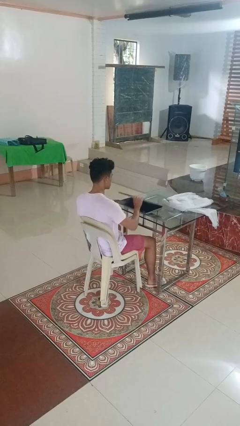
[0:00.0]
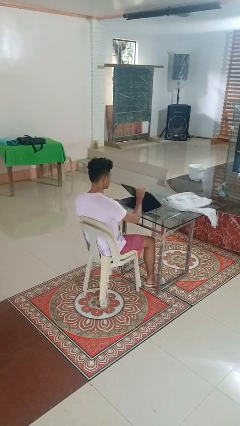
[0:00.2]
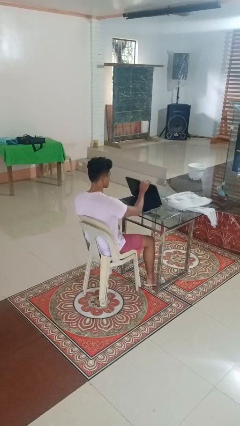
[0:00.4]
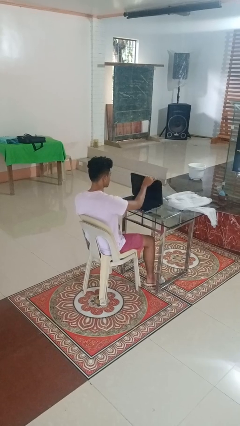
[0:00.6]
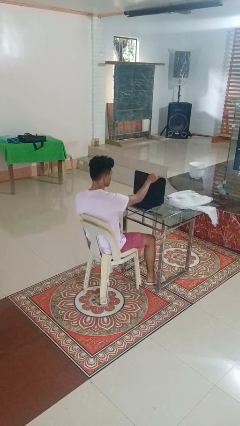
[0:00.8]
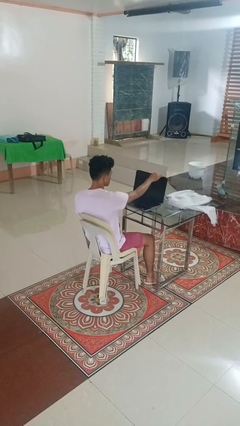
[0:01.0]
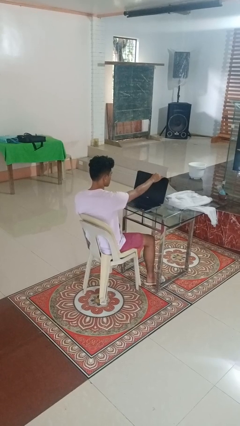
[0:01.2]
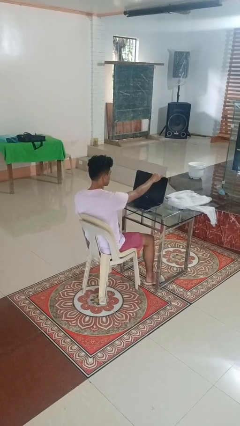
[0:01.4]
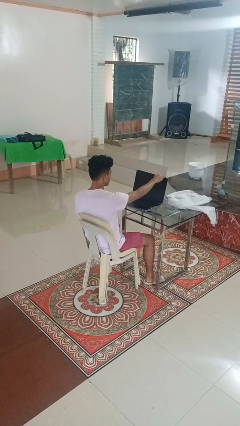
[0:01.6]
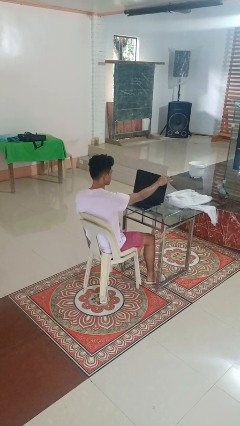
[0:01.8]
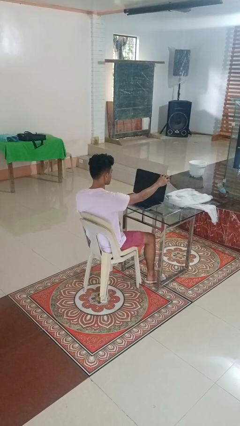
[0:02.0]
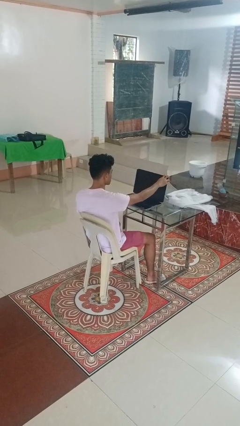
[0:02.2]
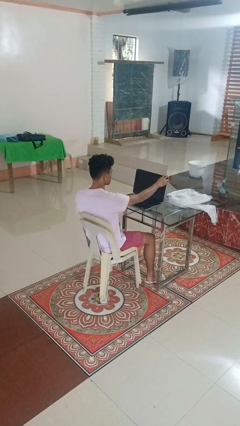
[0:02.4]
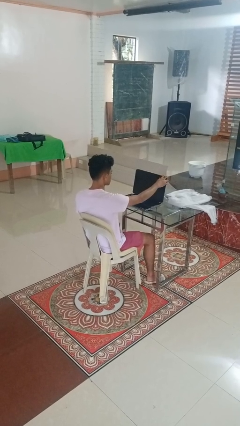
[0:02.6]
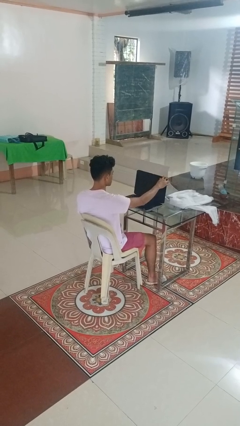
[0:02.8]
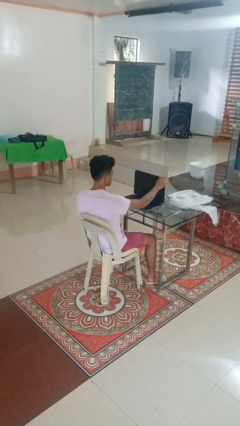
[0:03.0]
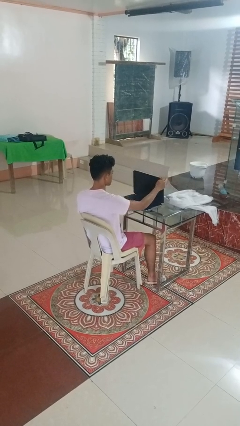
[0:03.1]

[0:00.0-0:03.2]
person opens laptop

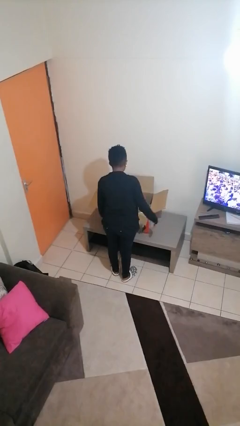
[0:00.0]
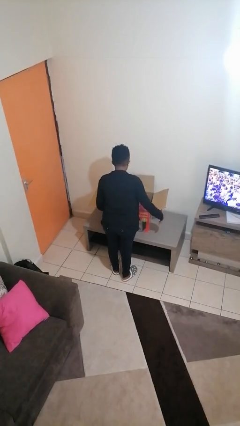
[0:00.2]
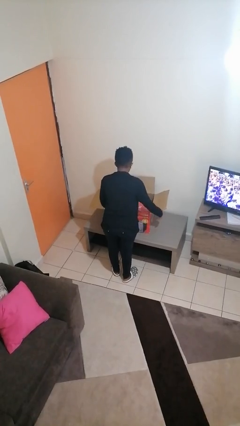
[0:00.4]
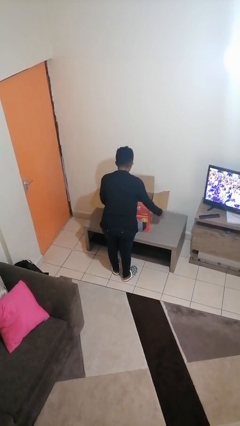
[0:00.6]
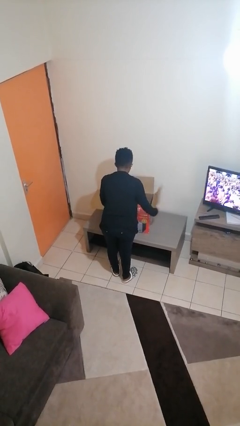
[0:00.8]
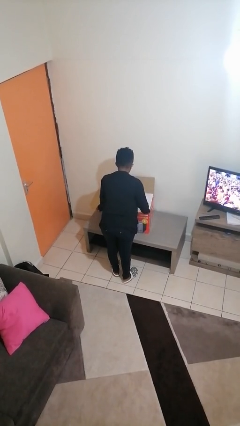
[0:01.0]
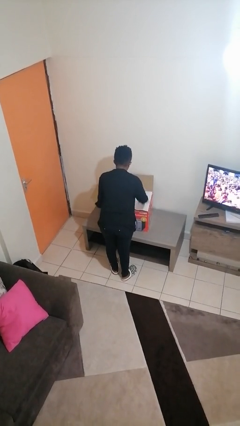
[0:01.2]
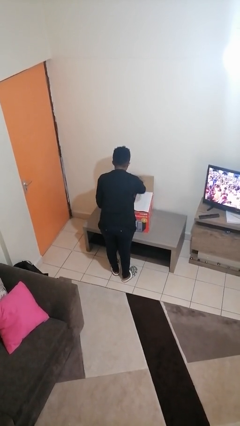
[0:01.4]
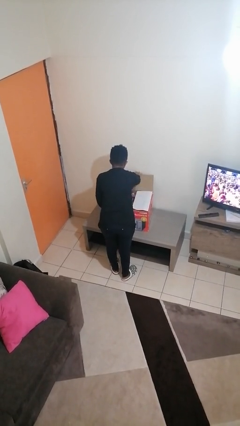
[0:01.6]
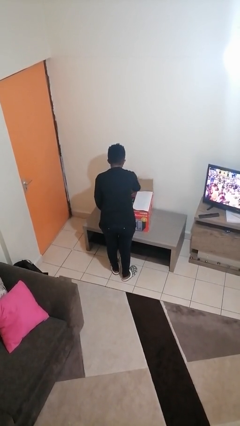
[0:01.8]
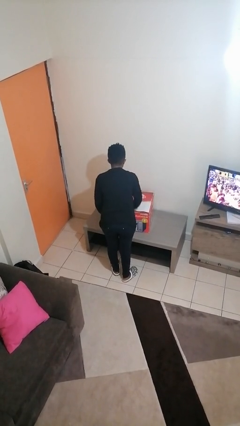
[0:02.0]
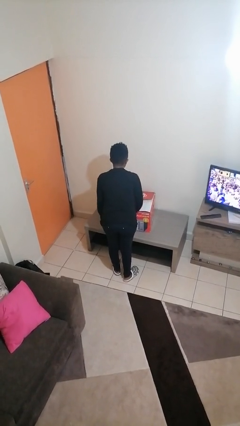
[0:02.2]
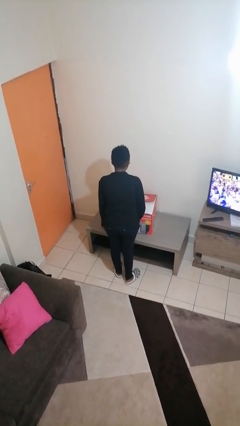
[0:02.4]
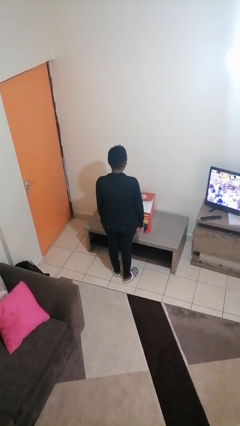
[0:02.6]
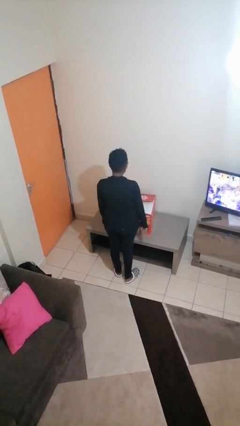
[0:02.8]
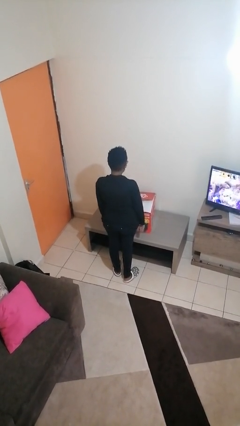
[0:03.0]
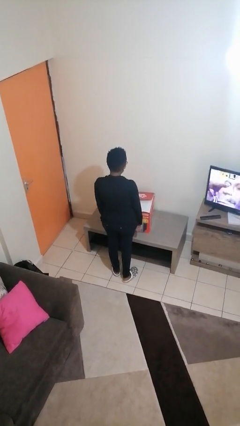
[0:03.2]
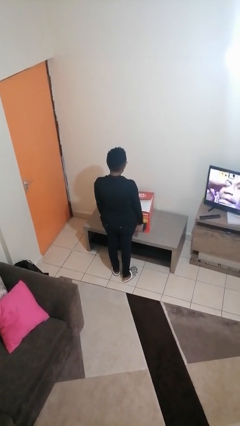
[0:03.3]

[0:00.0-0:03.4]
person closes box

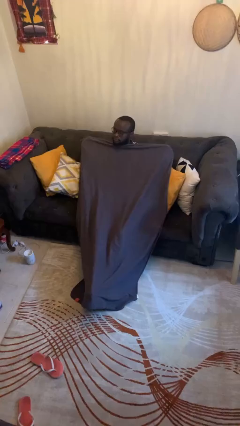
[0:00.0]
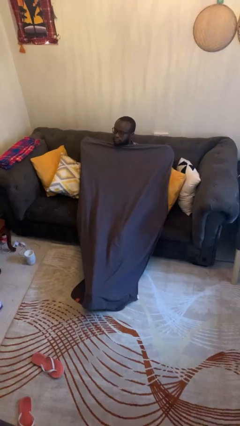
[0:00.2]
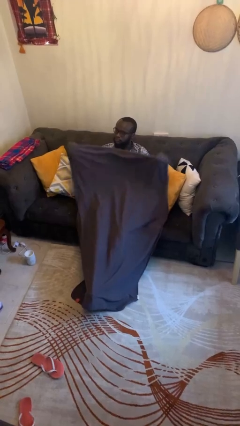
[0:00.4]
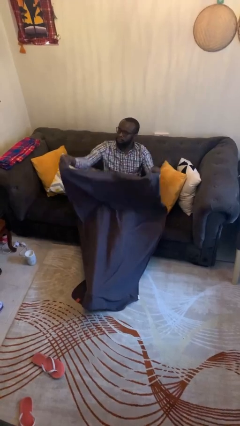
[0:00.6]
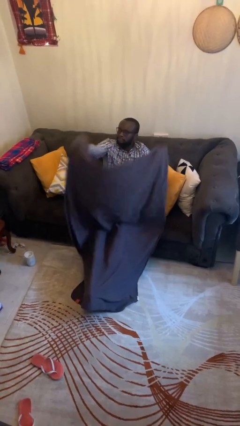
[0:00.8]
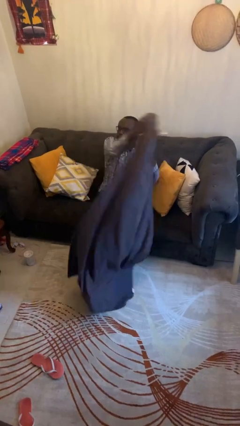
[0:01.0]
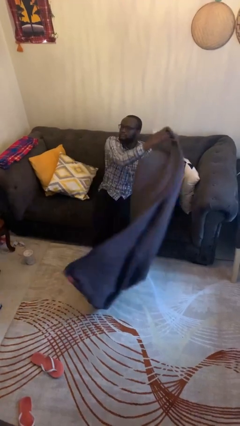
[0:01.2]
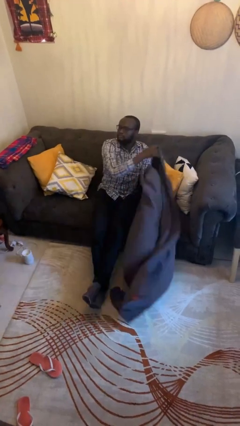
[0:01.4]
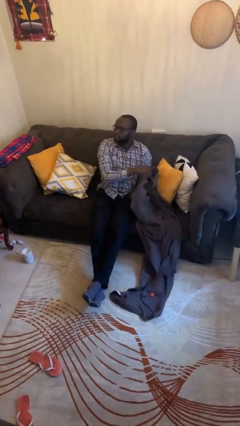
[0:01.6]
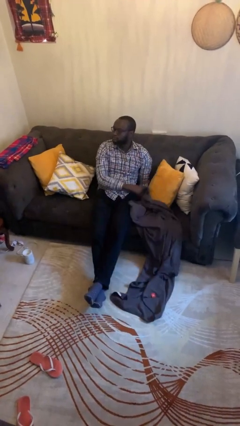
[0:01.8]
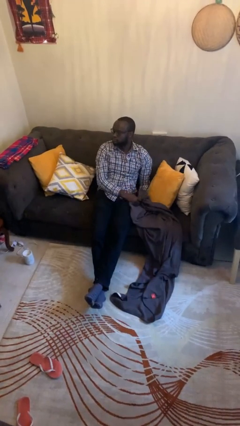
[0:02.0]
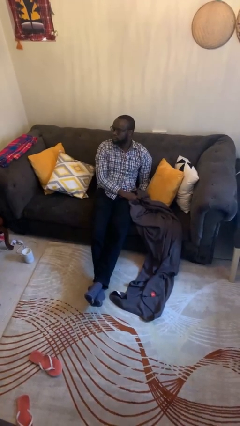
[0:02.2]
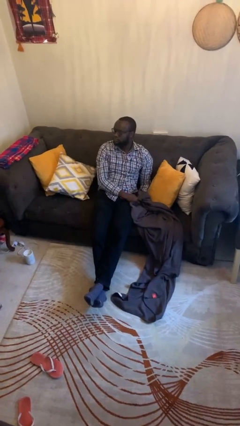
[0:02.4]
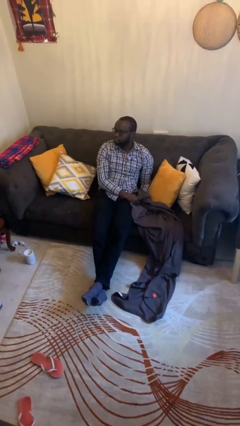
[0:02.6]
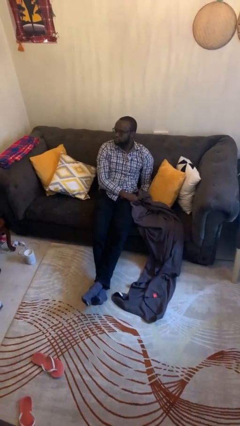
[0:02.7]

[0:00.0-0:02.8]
person uncovers with blanket

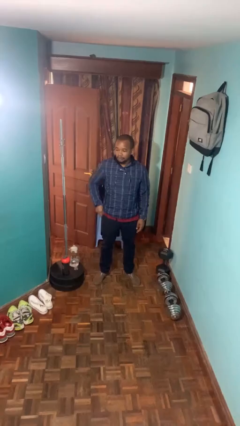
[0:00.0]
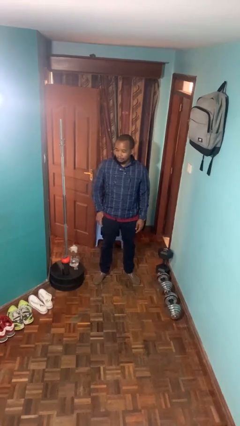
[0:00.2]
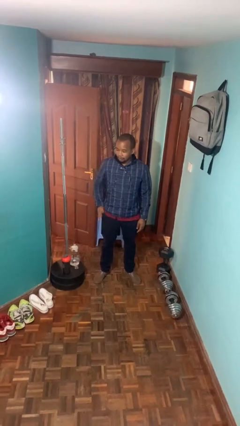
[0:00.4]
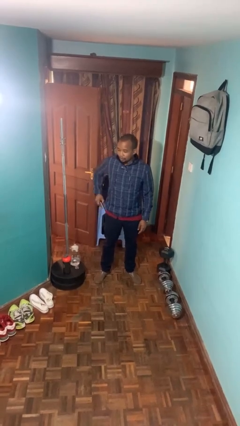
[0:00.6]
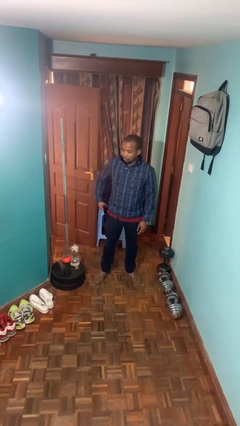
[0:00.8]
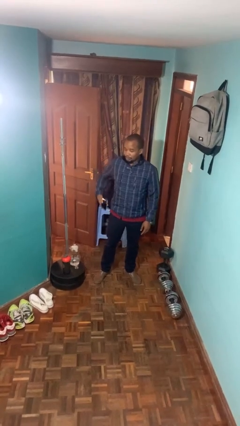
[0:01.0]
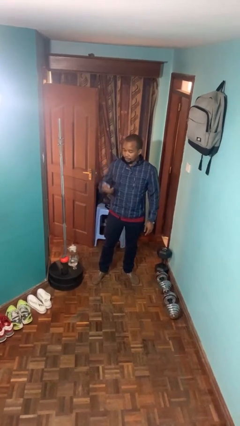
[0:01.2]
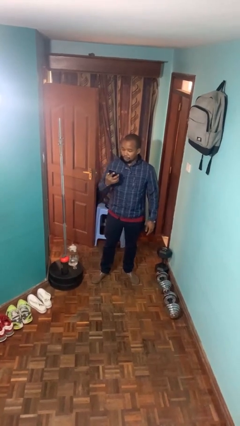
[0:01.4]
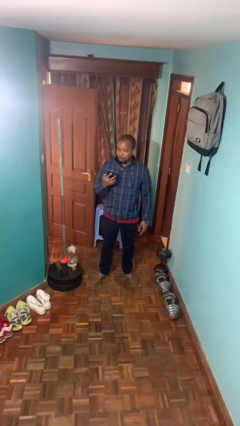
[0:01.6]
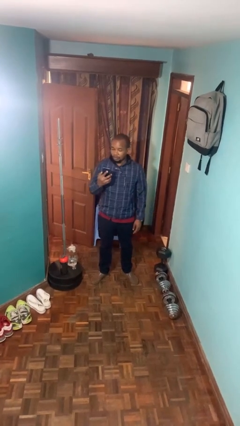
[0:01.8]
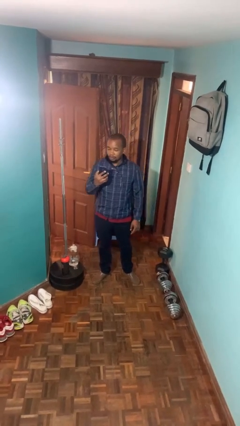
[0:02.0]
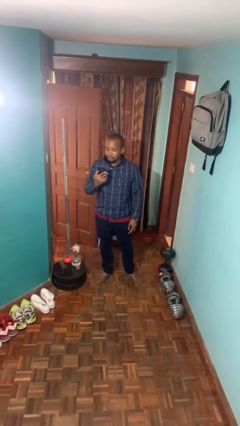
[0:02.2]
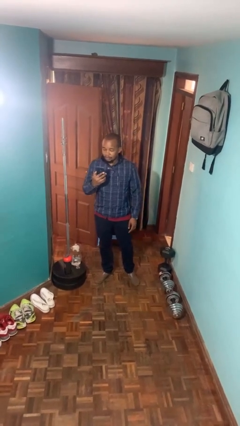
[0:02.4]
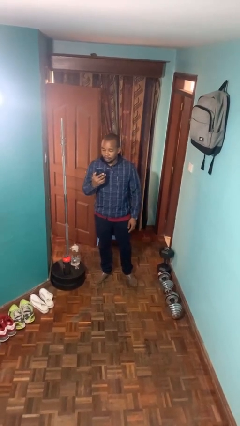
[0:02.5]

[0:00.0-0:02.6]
person takes phone from pocket

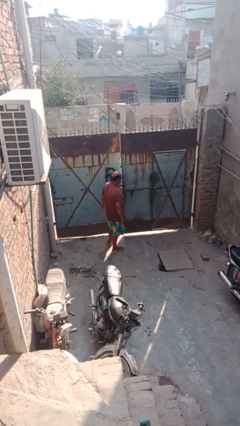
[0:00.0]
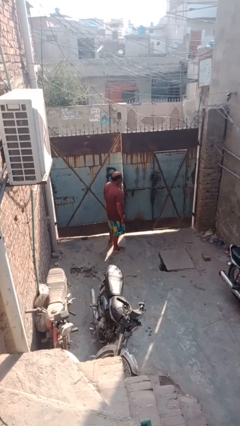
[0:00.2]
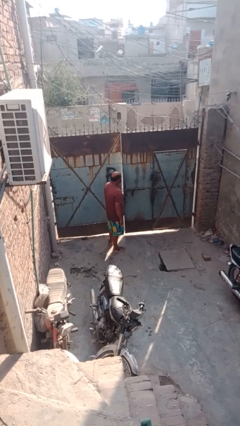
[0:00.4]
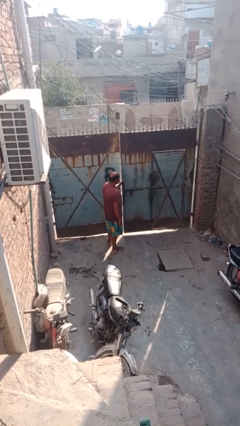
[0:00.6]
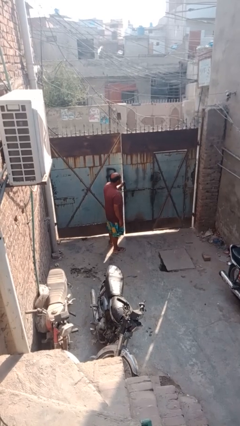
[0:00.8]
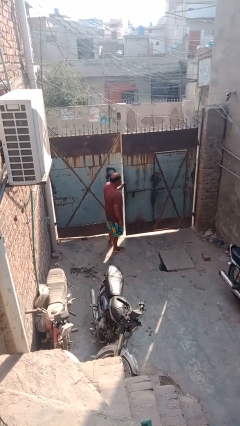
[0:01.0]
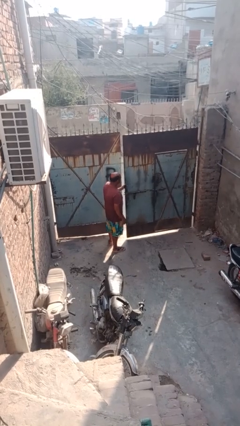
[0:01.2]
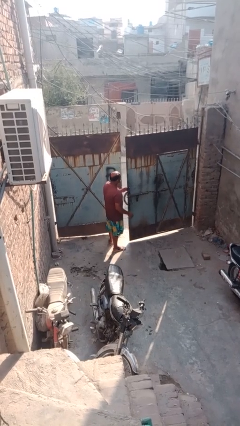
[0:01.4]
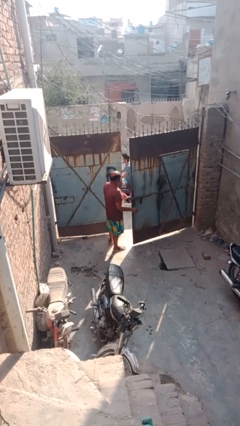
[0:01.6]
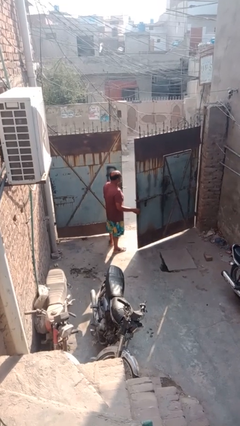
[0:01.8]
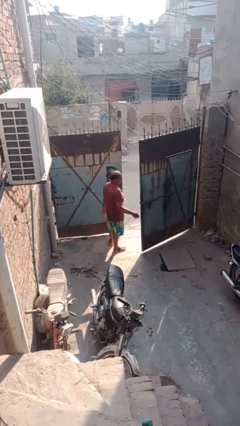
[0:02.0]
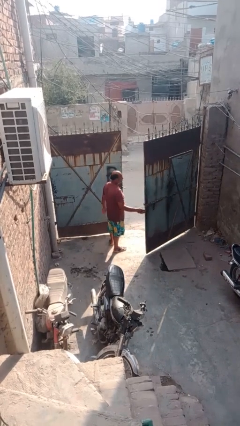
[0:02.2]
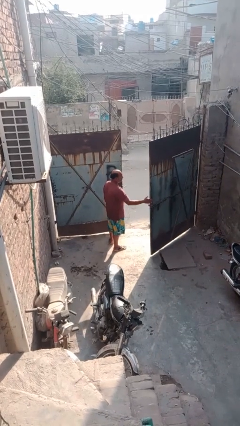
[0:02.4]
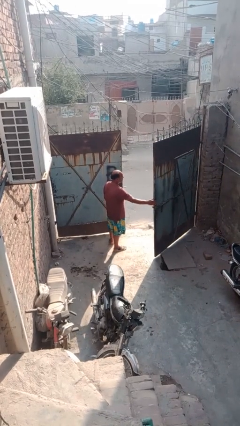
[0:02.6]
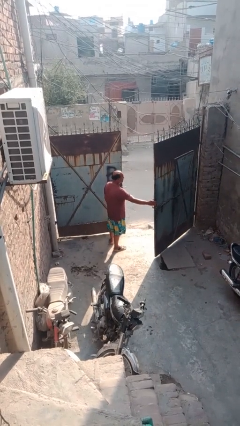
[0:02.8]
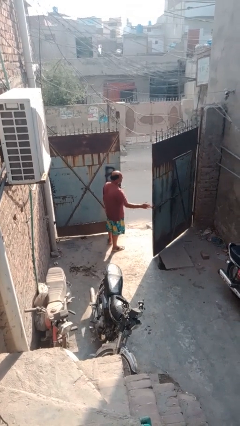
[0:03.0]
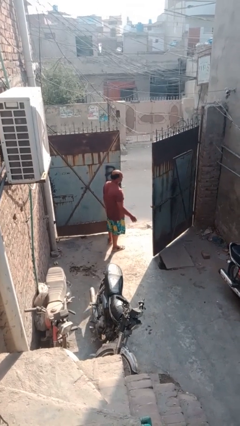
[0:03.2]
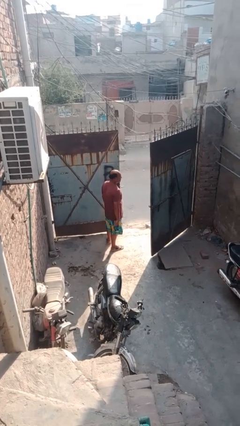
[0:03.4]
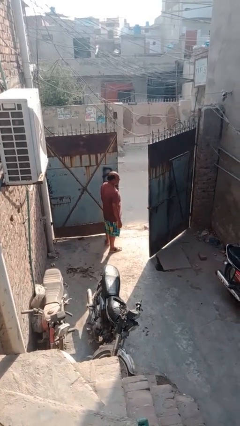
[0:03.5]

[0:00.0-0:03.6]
person opens gate

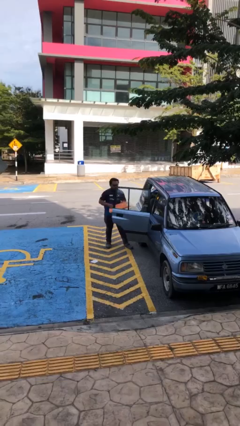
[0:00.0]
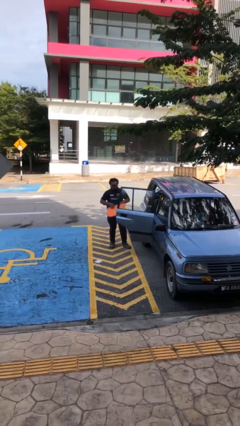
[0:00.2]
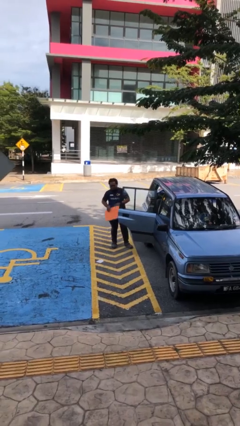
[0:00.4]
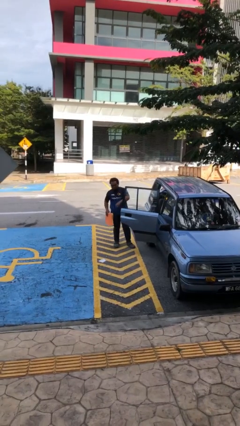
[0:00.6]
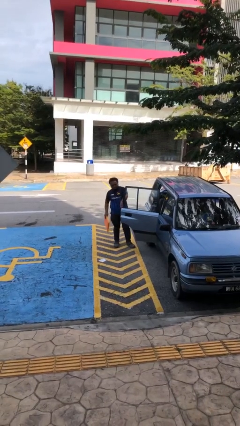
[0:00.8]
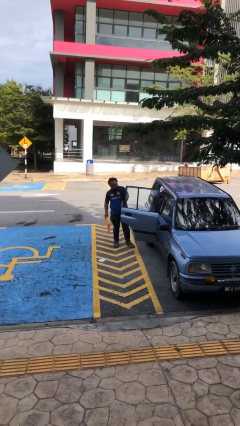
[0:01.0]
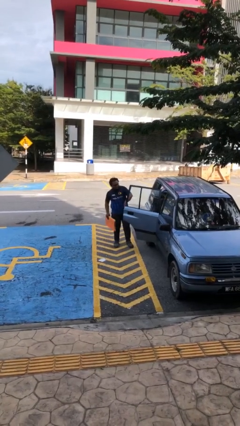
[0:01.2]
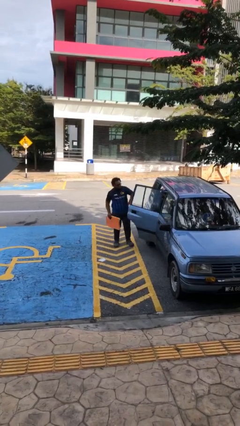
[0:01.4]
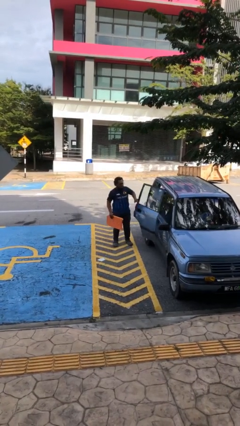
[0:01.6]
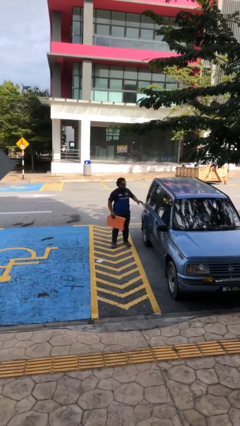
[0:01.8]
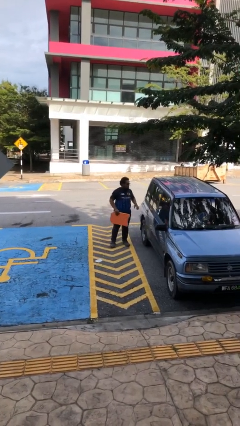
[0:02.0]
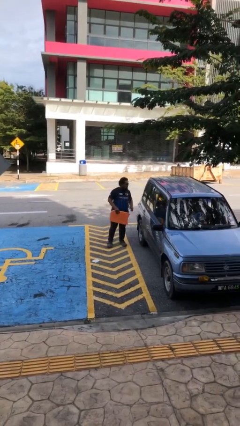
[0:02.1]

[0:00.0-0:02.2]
person closes car door
